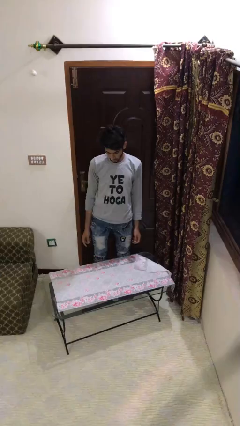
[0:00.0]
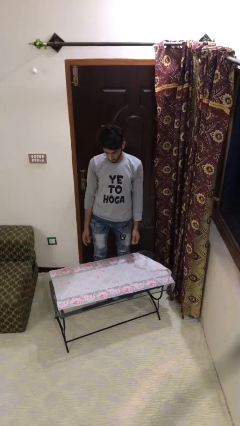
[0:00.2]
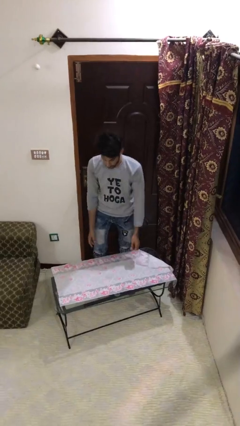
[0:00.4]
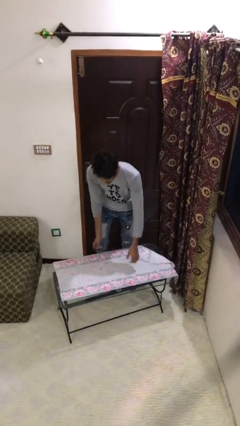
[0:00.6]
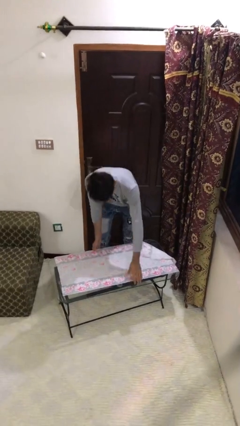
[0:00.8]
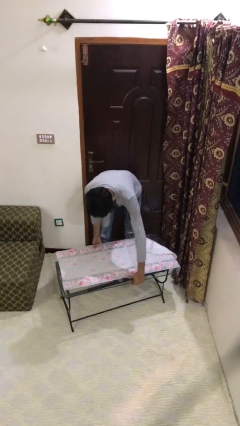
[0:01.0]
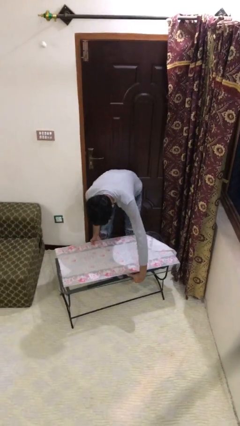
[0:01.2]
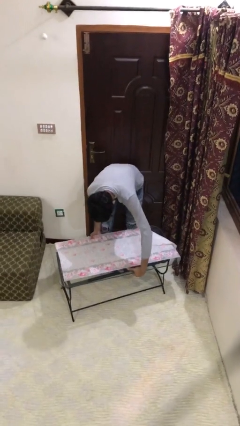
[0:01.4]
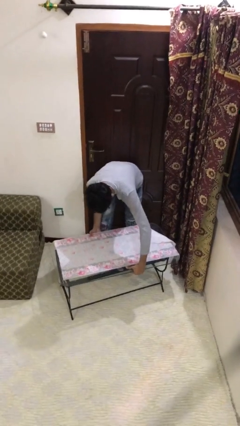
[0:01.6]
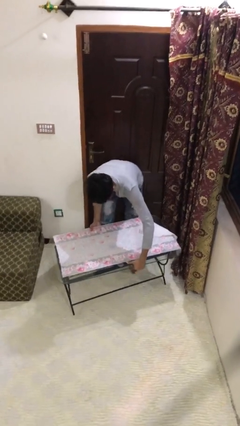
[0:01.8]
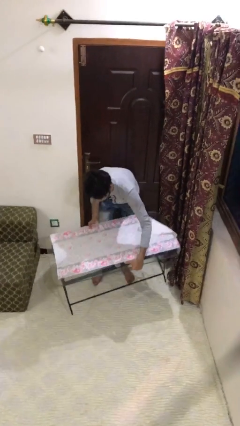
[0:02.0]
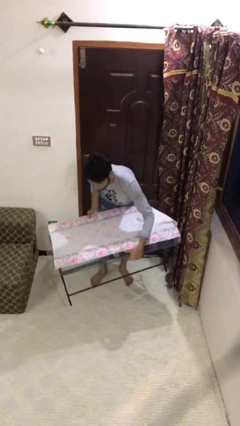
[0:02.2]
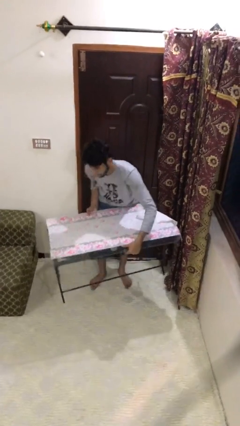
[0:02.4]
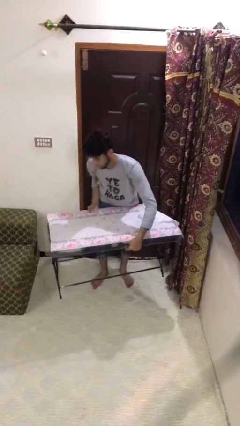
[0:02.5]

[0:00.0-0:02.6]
person picks up object from floor

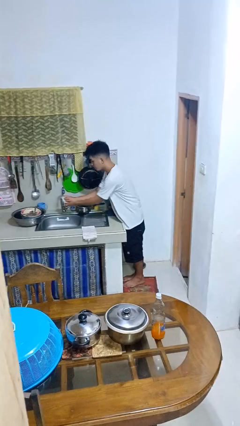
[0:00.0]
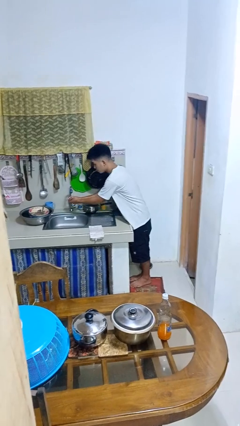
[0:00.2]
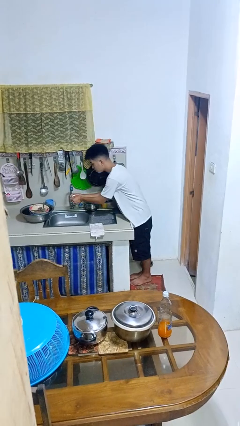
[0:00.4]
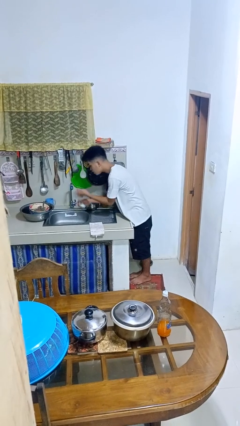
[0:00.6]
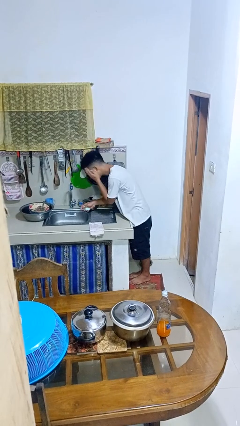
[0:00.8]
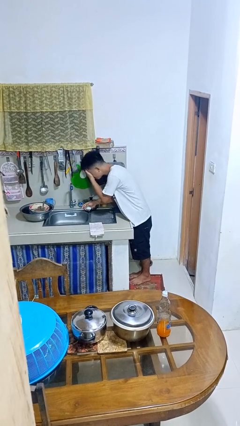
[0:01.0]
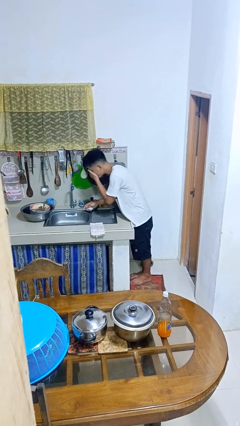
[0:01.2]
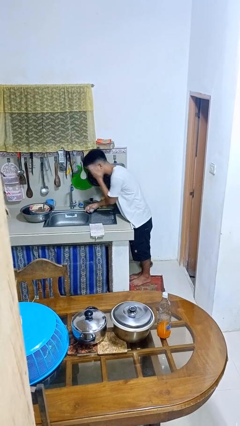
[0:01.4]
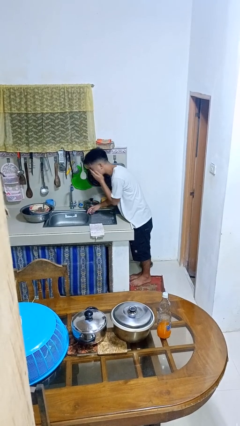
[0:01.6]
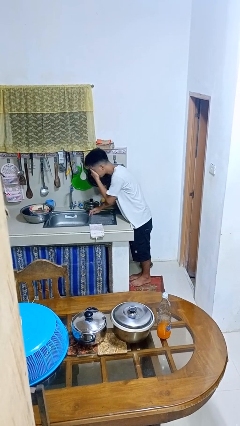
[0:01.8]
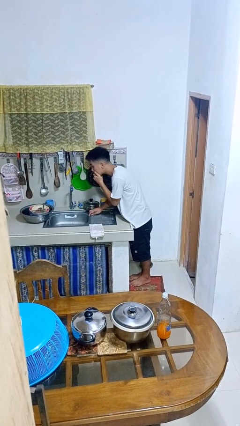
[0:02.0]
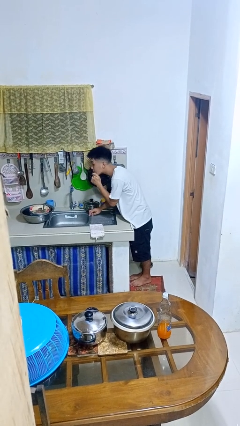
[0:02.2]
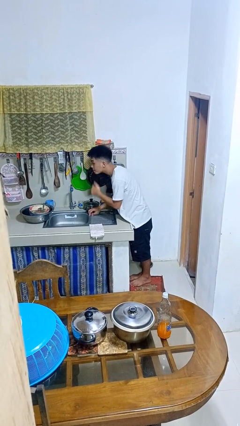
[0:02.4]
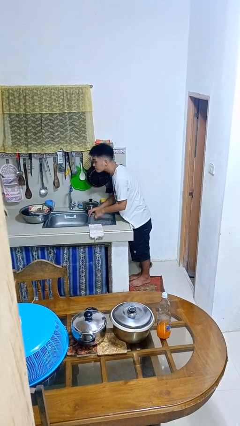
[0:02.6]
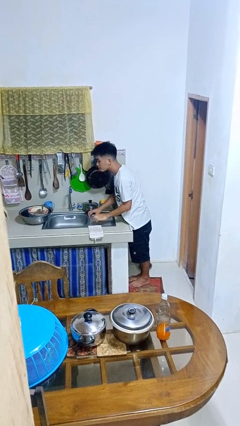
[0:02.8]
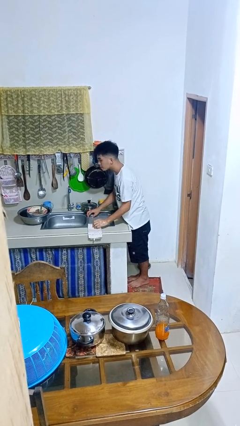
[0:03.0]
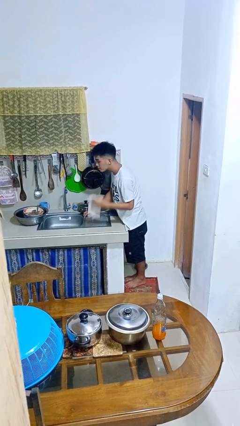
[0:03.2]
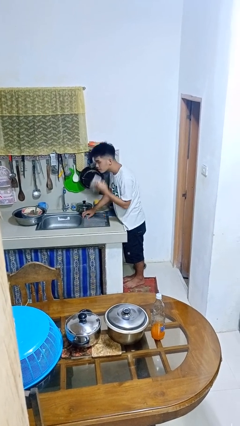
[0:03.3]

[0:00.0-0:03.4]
person washes face

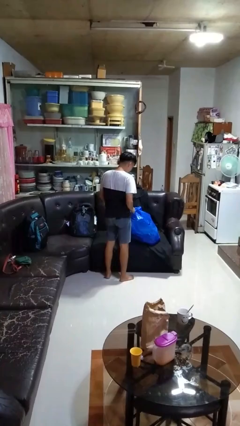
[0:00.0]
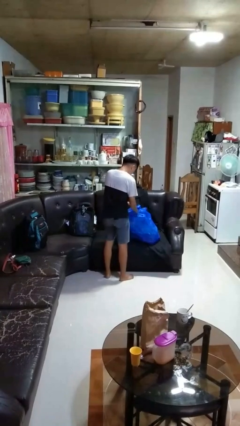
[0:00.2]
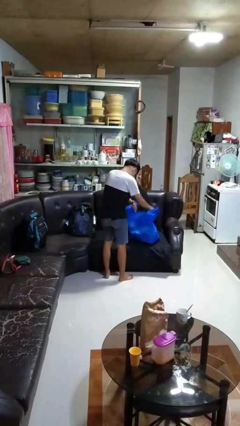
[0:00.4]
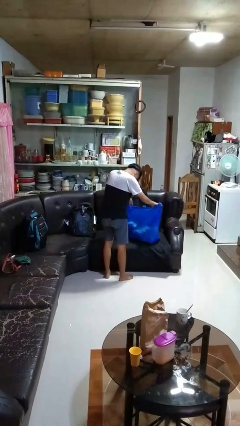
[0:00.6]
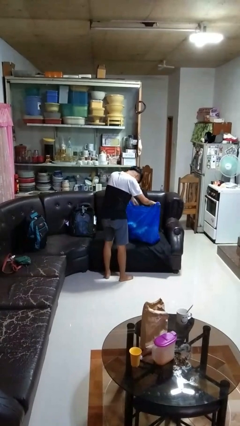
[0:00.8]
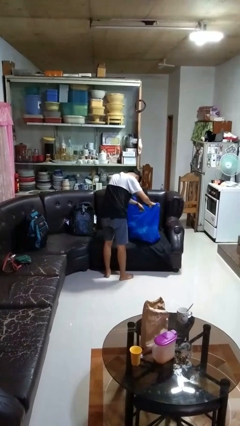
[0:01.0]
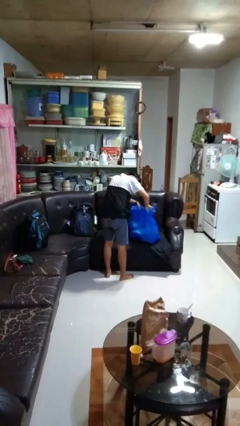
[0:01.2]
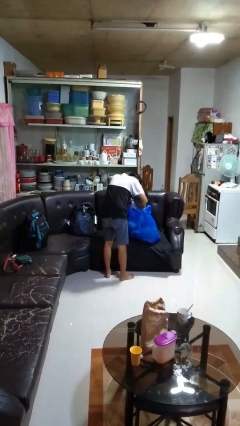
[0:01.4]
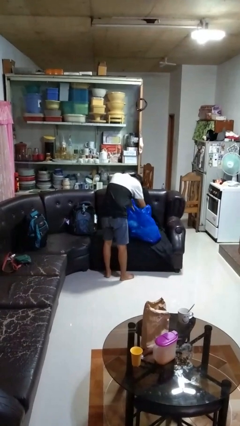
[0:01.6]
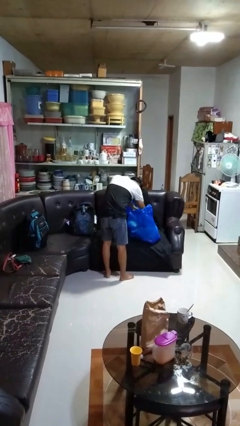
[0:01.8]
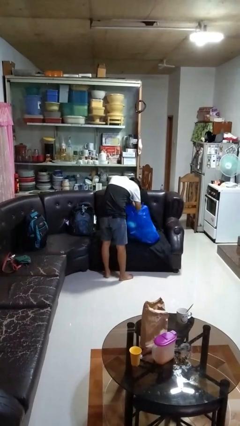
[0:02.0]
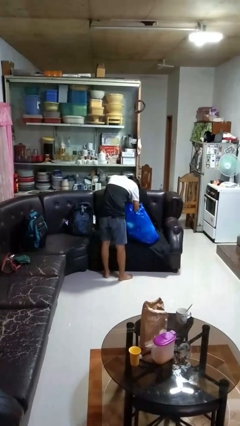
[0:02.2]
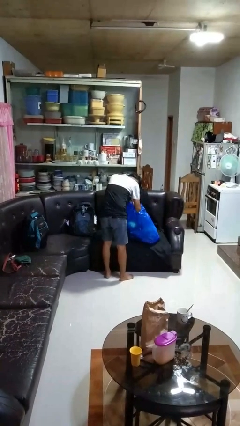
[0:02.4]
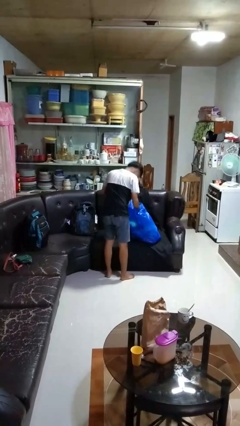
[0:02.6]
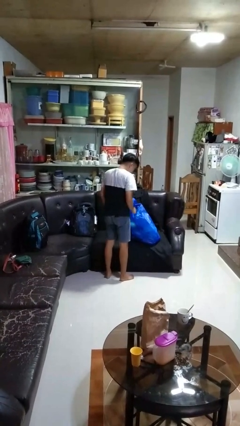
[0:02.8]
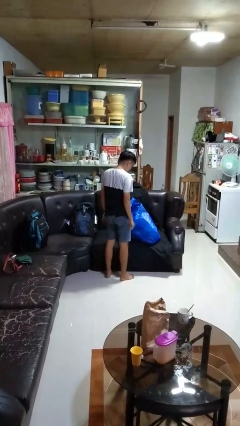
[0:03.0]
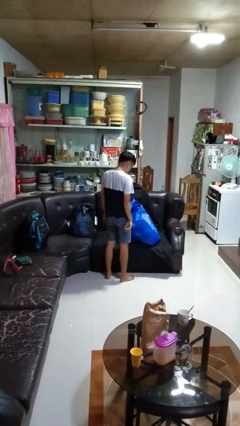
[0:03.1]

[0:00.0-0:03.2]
person searches in bag

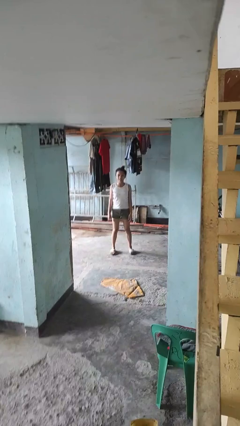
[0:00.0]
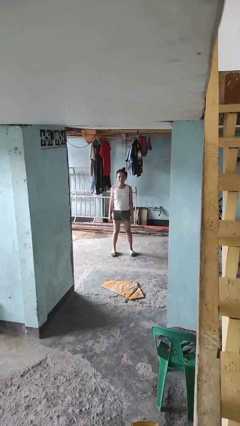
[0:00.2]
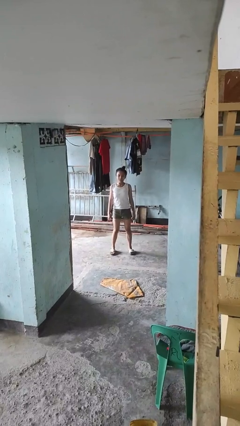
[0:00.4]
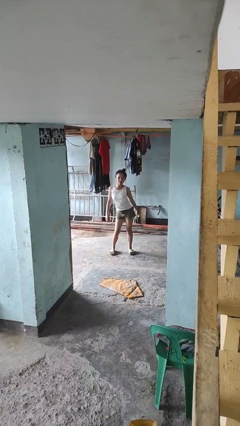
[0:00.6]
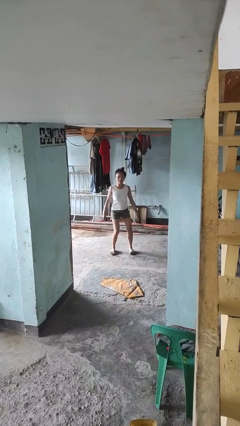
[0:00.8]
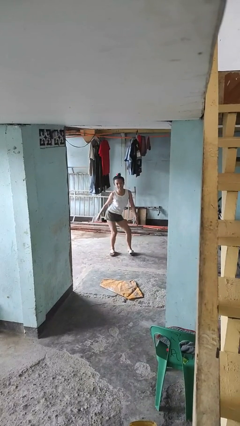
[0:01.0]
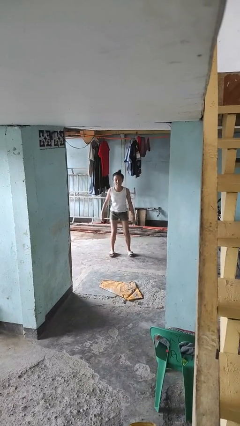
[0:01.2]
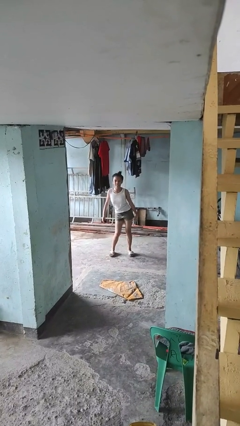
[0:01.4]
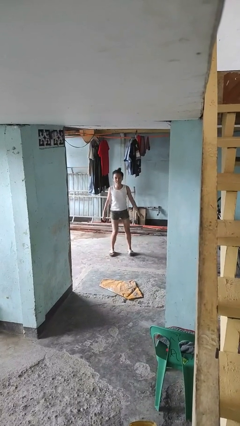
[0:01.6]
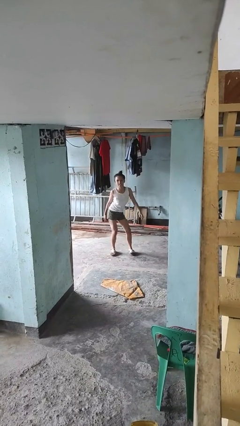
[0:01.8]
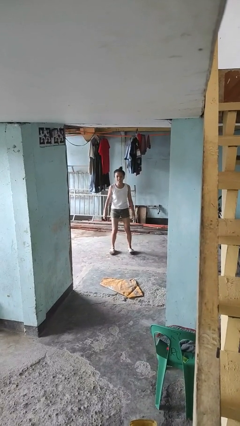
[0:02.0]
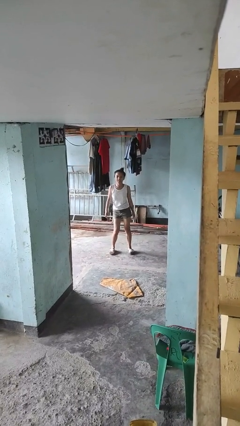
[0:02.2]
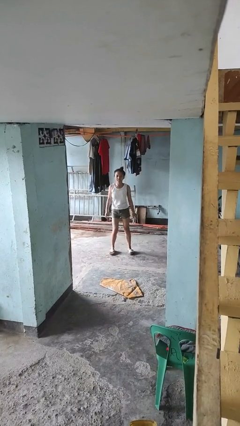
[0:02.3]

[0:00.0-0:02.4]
person wiggles hips

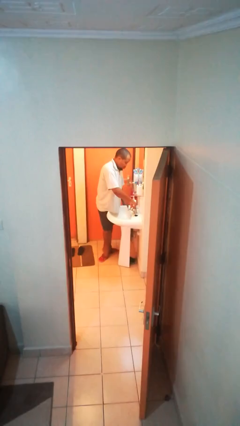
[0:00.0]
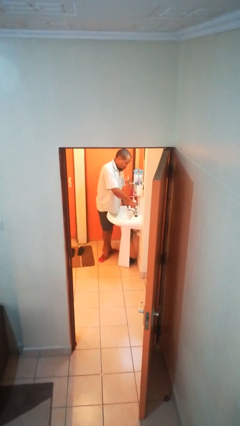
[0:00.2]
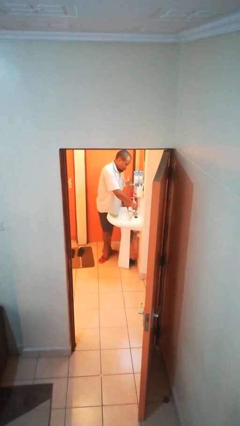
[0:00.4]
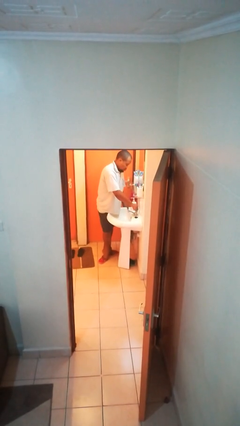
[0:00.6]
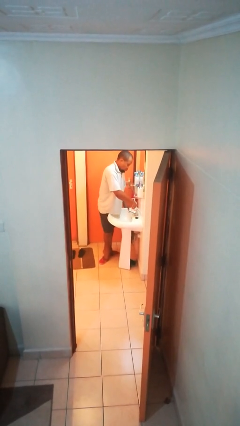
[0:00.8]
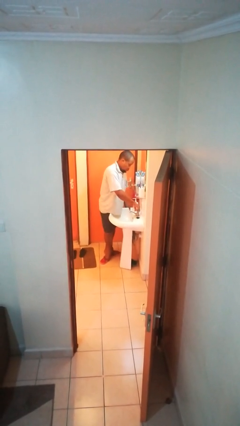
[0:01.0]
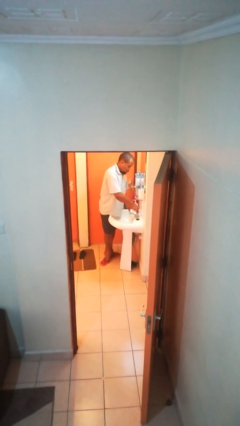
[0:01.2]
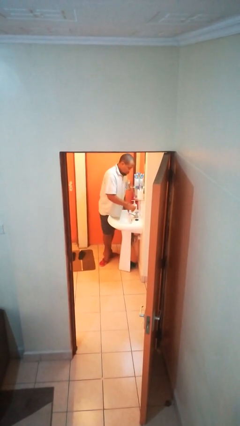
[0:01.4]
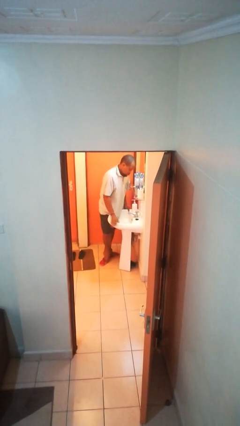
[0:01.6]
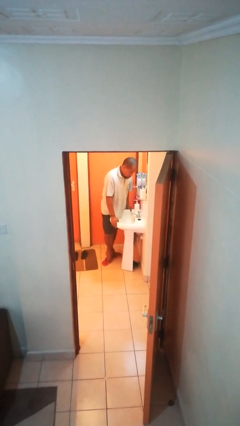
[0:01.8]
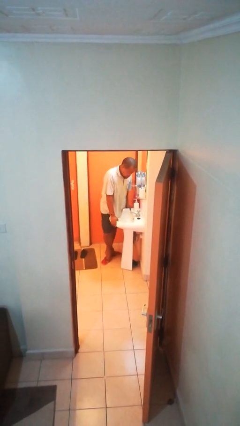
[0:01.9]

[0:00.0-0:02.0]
person turns off faucet

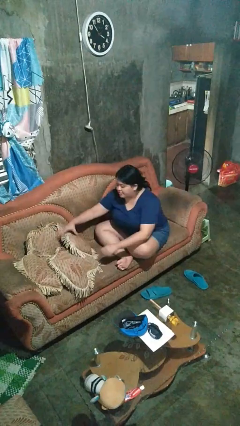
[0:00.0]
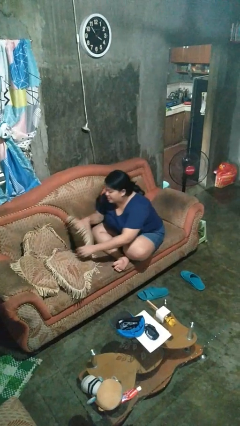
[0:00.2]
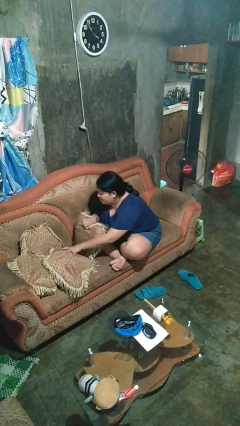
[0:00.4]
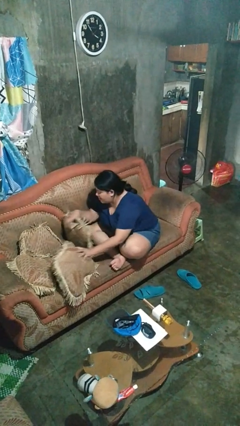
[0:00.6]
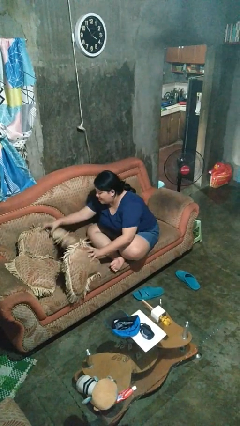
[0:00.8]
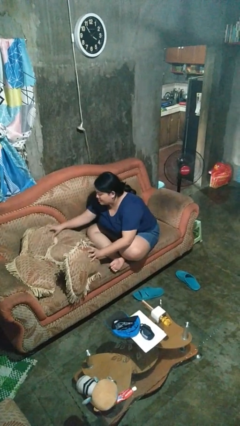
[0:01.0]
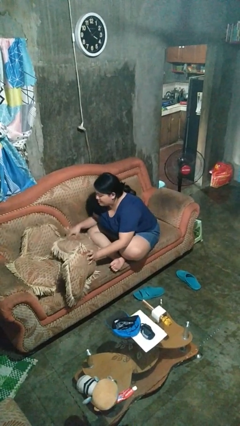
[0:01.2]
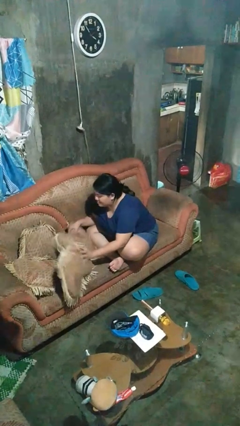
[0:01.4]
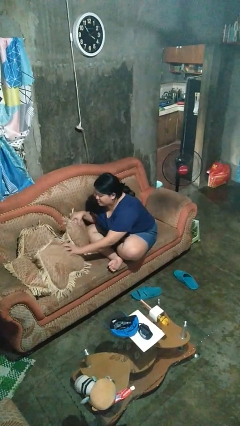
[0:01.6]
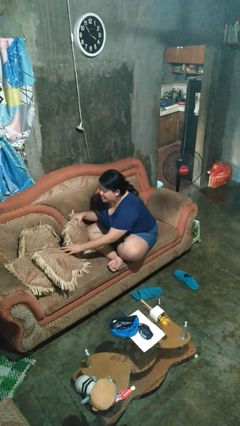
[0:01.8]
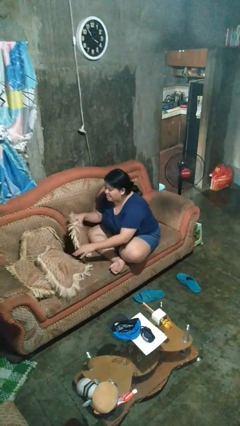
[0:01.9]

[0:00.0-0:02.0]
person searches in couch

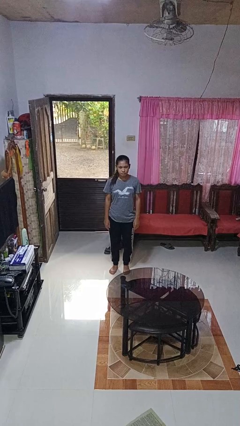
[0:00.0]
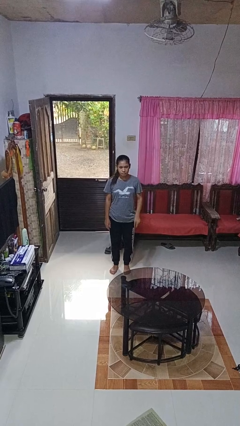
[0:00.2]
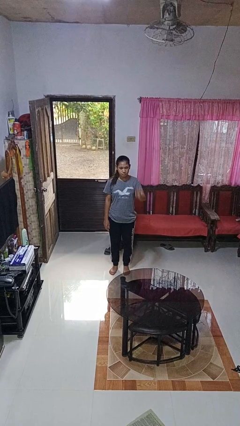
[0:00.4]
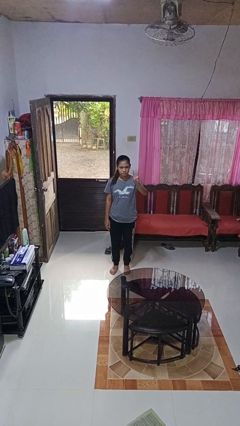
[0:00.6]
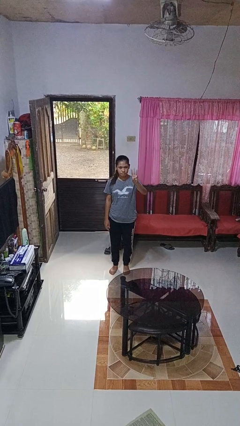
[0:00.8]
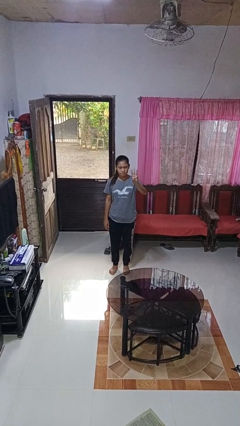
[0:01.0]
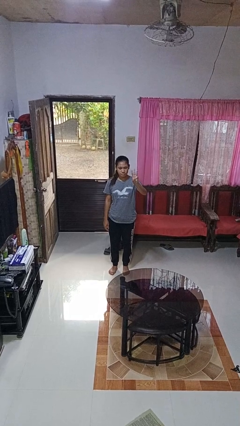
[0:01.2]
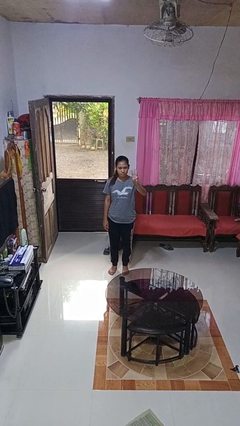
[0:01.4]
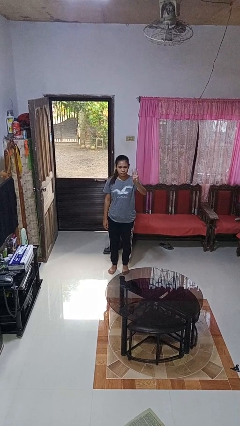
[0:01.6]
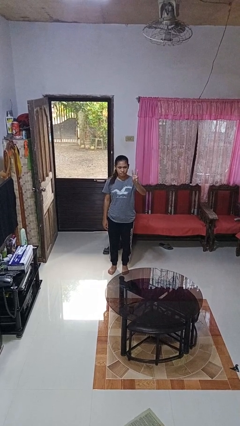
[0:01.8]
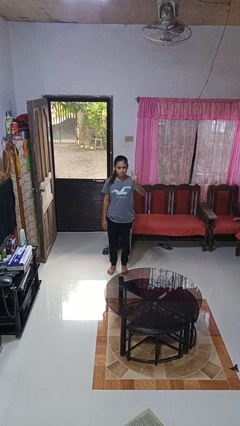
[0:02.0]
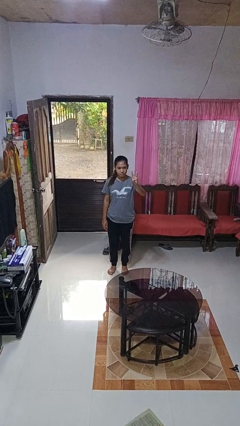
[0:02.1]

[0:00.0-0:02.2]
person gestures number three
